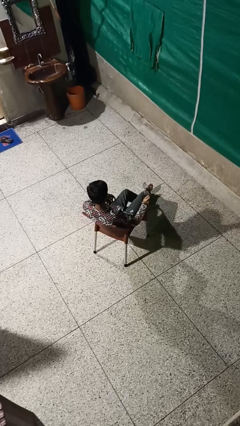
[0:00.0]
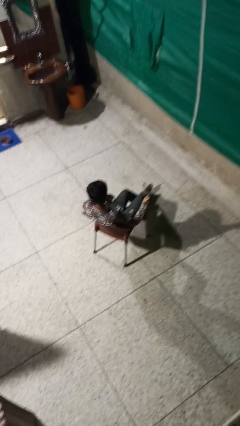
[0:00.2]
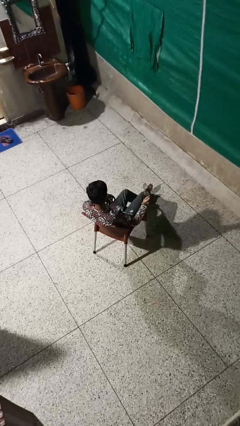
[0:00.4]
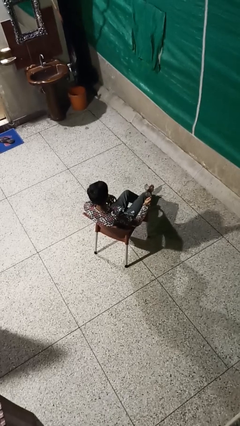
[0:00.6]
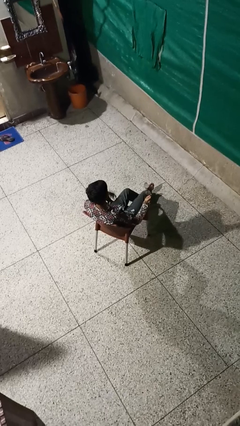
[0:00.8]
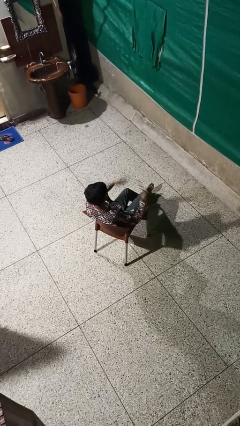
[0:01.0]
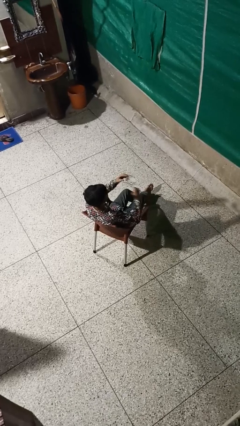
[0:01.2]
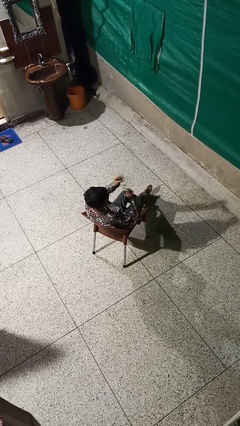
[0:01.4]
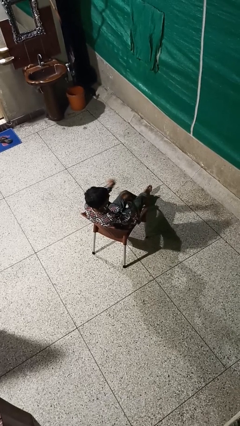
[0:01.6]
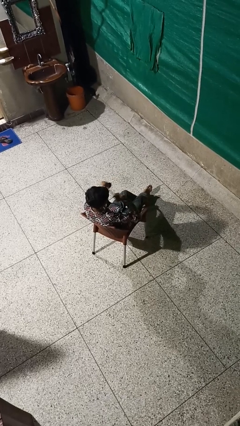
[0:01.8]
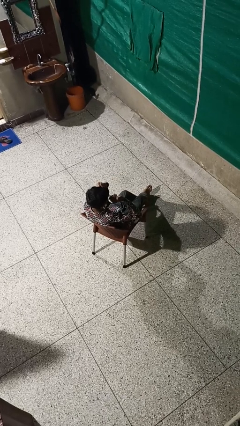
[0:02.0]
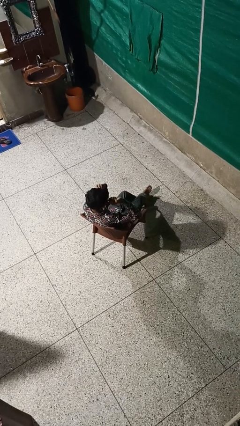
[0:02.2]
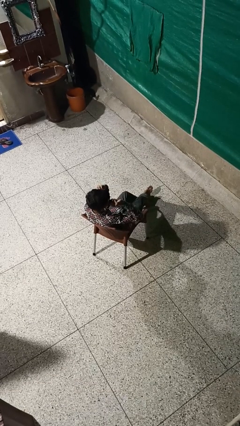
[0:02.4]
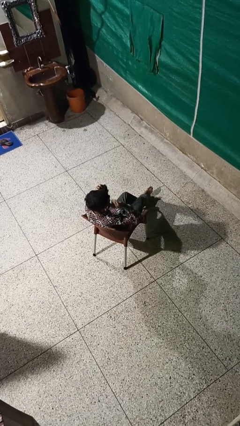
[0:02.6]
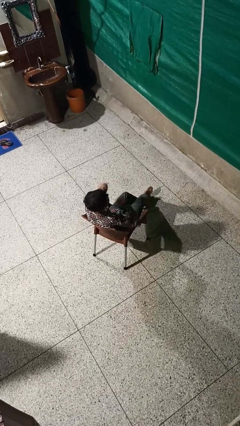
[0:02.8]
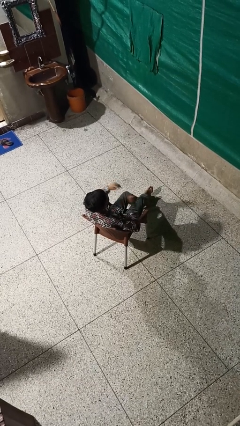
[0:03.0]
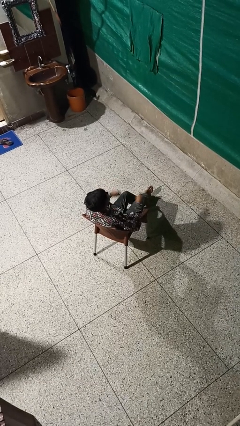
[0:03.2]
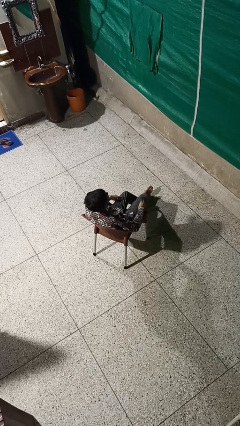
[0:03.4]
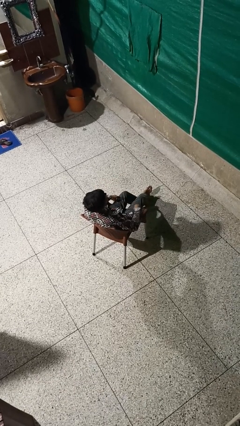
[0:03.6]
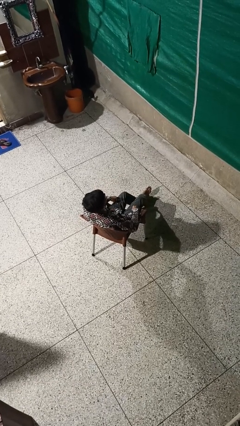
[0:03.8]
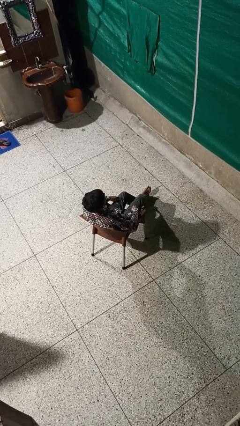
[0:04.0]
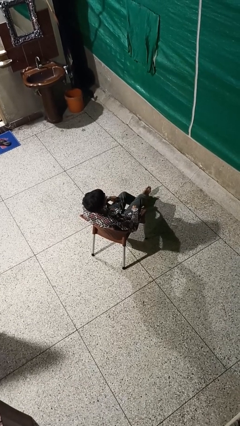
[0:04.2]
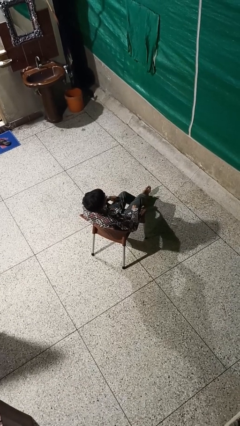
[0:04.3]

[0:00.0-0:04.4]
person puts on glasses

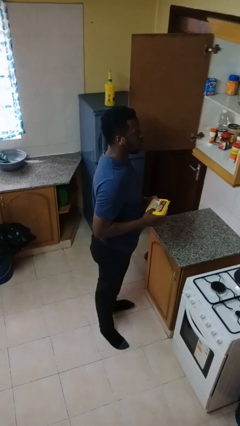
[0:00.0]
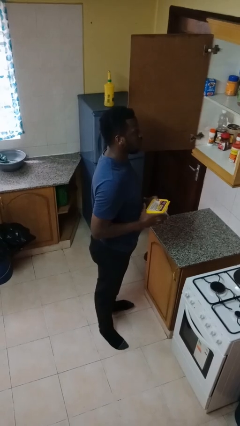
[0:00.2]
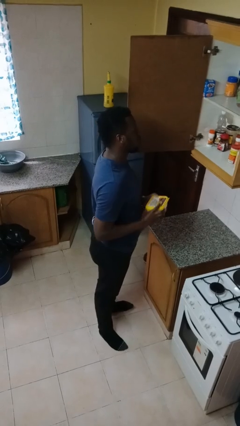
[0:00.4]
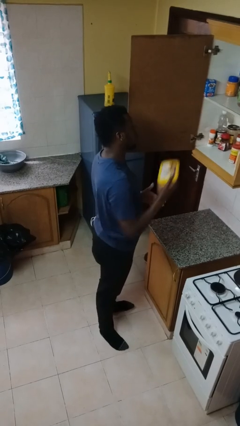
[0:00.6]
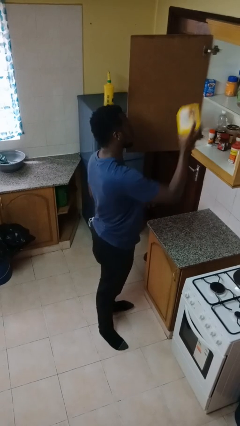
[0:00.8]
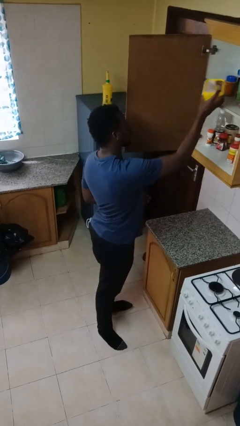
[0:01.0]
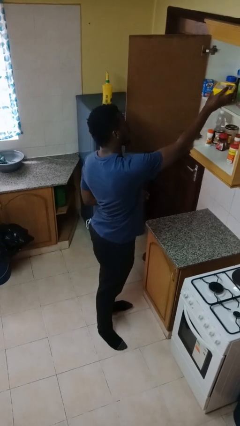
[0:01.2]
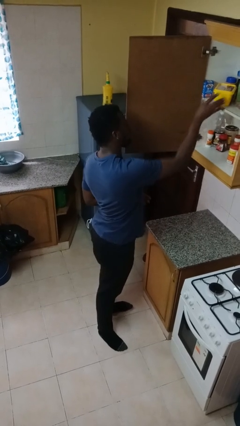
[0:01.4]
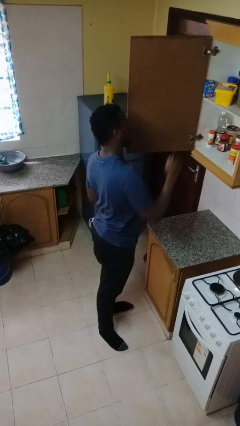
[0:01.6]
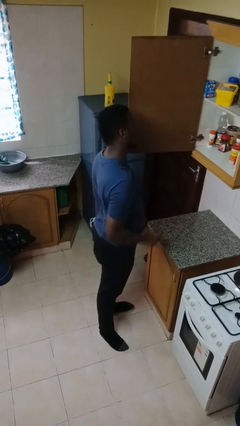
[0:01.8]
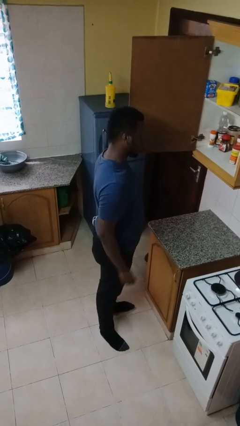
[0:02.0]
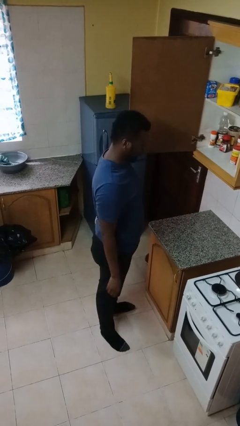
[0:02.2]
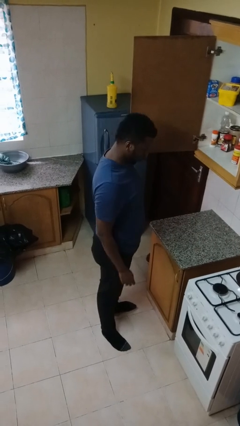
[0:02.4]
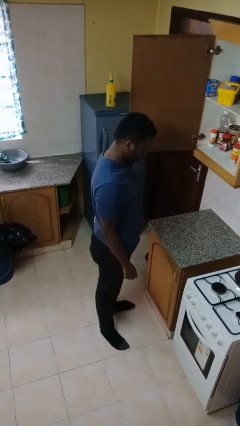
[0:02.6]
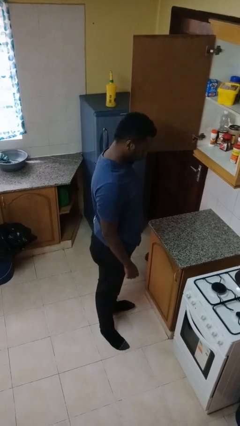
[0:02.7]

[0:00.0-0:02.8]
person puts down object on shelf

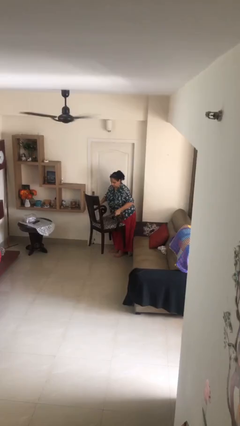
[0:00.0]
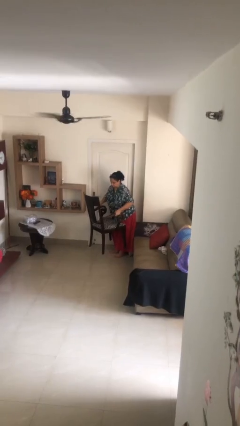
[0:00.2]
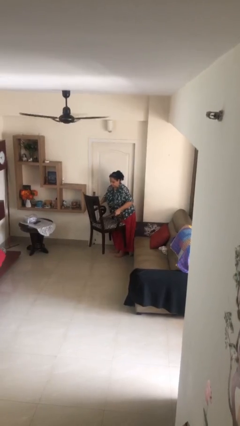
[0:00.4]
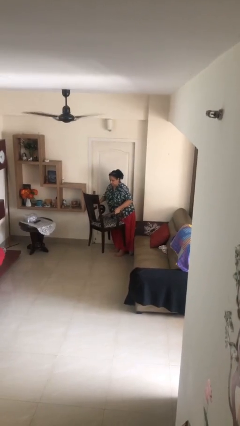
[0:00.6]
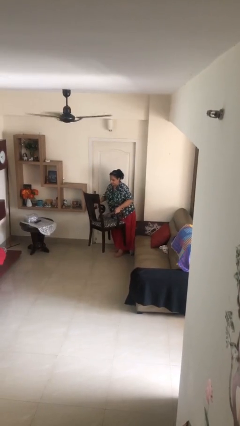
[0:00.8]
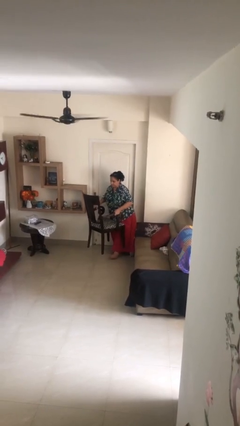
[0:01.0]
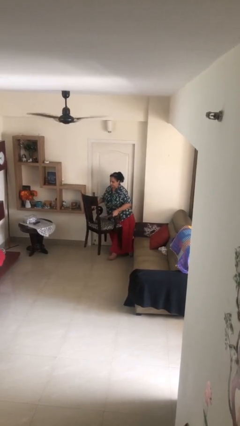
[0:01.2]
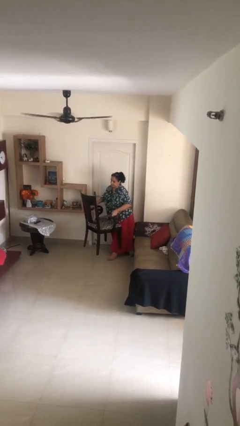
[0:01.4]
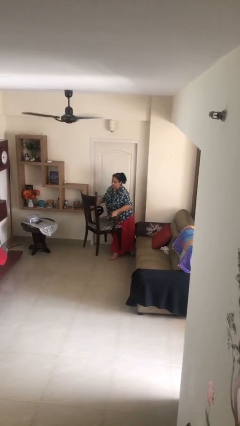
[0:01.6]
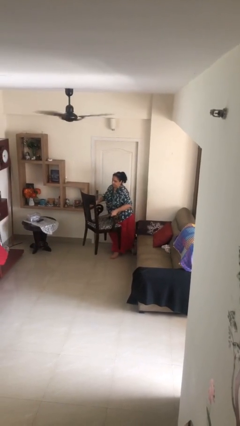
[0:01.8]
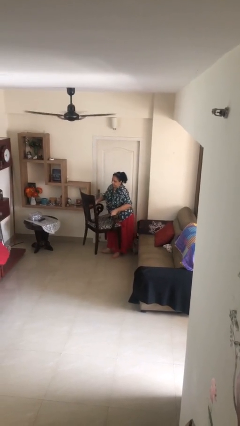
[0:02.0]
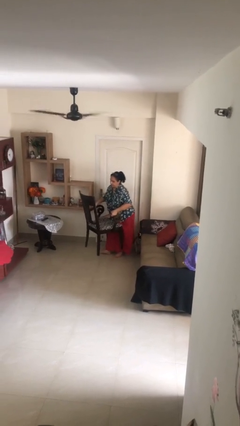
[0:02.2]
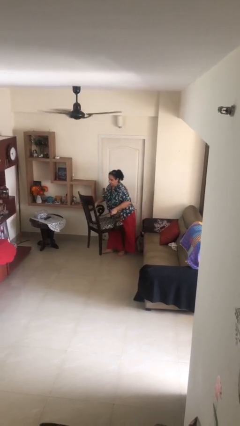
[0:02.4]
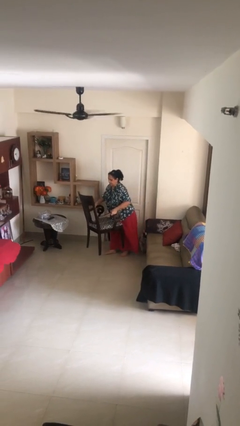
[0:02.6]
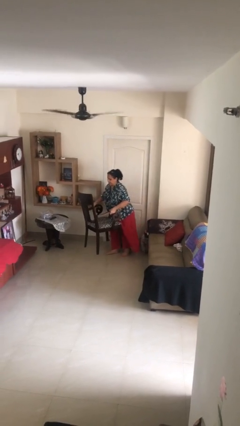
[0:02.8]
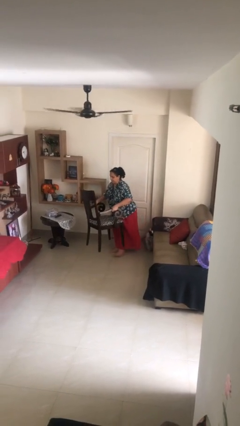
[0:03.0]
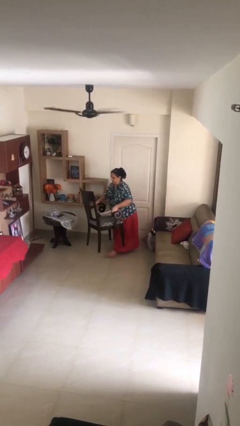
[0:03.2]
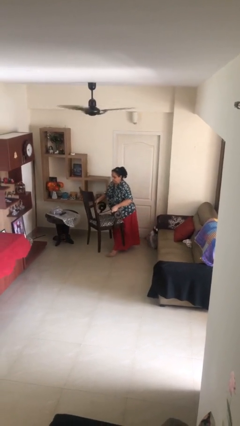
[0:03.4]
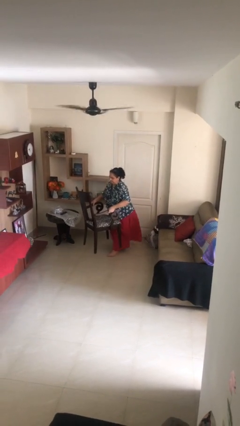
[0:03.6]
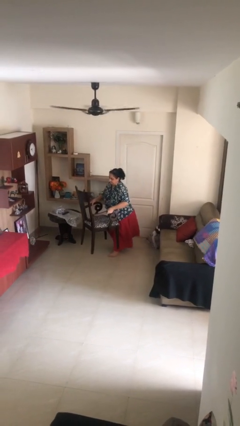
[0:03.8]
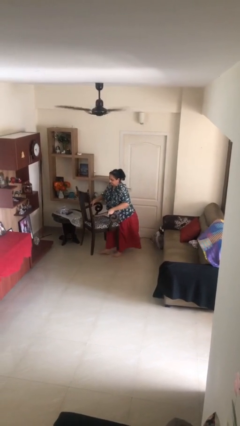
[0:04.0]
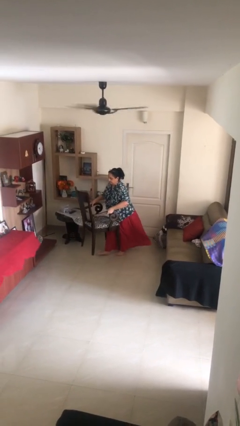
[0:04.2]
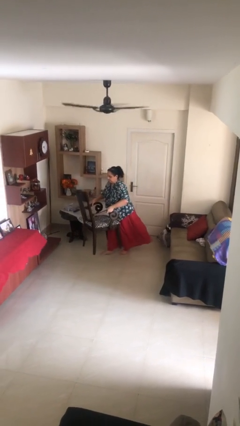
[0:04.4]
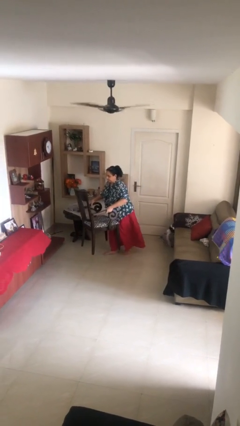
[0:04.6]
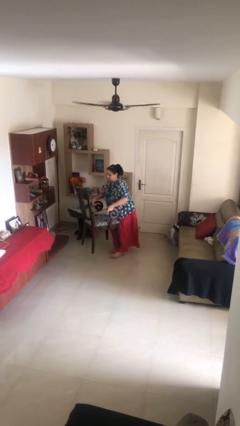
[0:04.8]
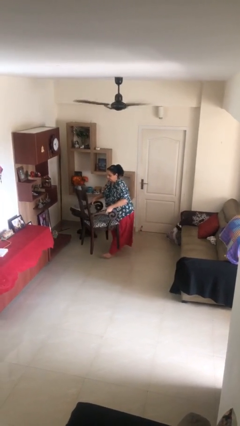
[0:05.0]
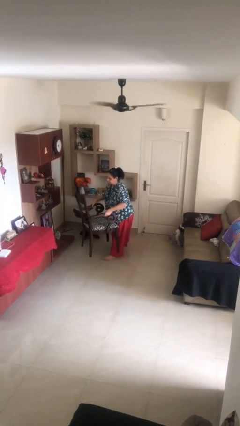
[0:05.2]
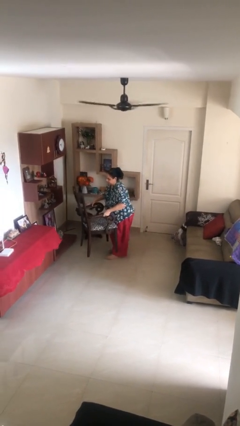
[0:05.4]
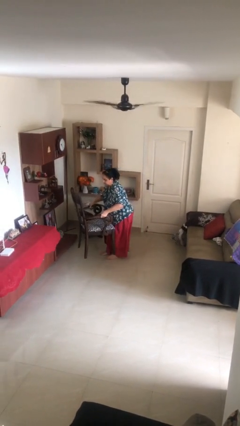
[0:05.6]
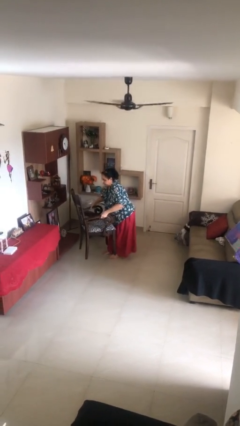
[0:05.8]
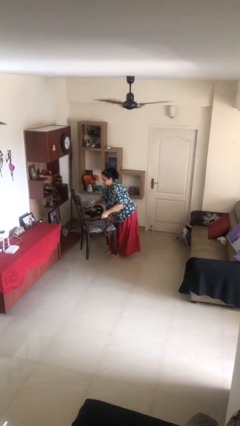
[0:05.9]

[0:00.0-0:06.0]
person carries heavy object

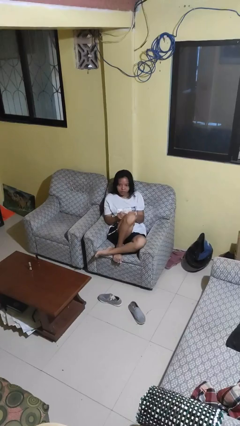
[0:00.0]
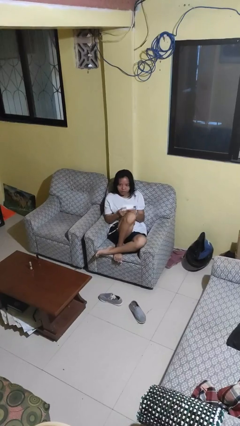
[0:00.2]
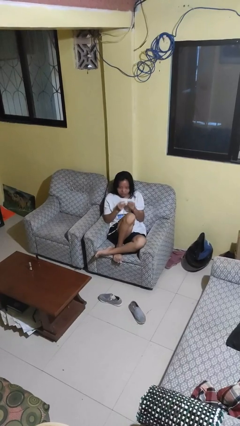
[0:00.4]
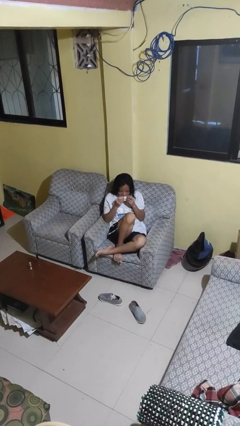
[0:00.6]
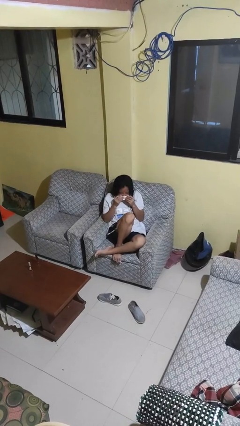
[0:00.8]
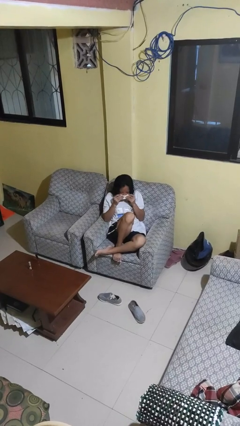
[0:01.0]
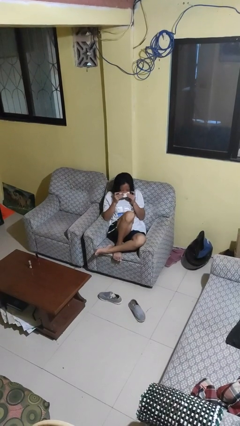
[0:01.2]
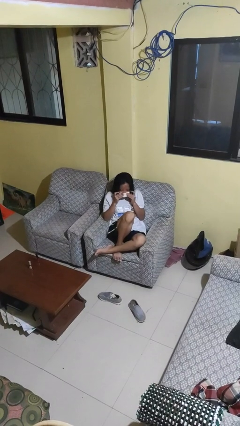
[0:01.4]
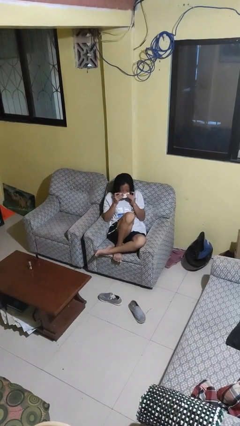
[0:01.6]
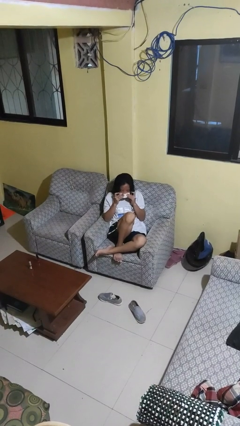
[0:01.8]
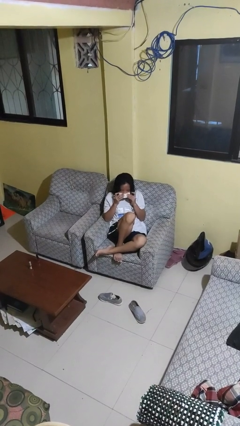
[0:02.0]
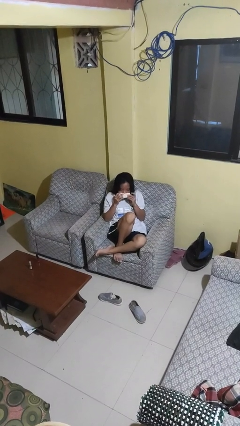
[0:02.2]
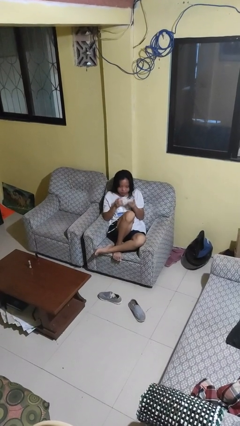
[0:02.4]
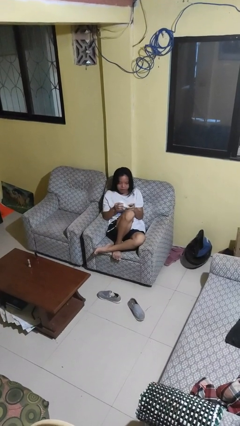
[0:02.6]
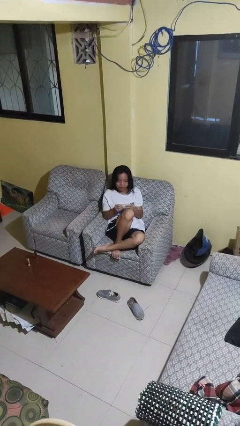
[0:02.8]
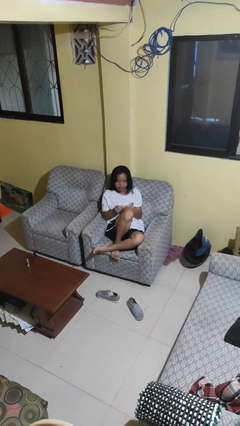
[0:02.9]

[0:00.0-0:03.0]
person blows nose

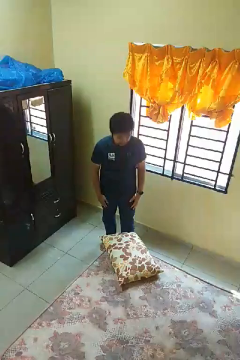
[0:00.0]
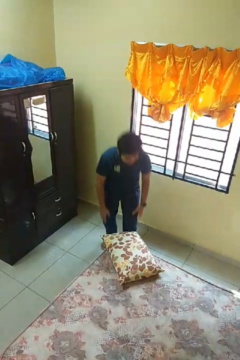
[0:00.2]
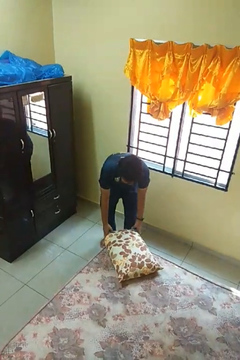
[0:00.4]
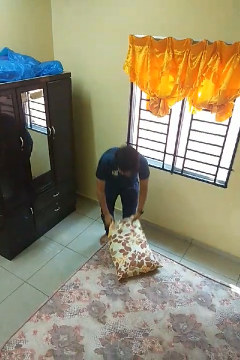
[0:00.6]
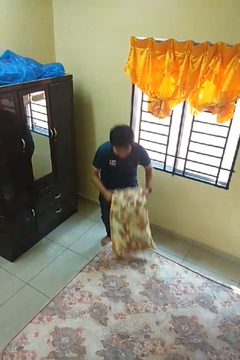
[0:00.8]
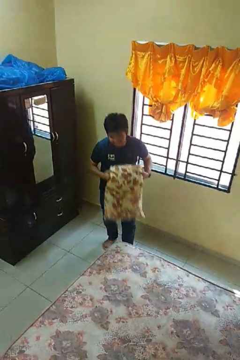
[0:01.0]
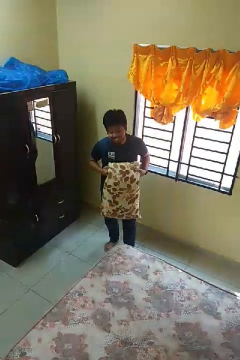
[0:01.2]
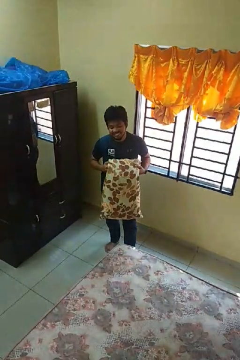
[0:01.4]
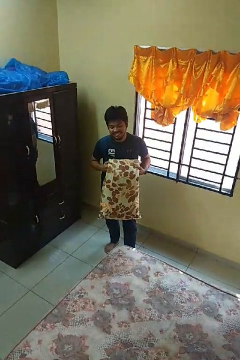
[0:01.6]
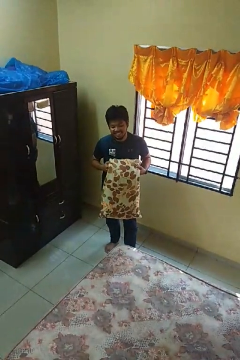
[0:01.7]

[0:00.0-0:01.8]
person picks up object from bed
